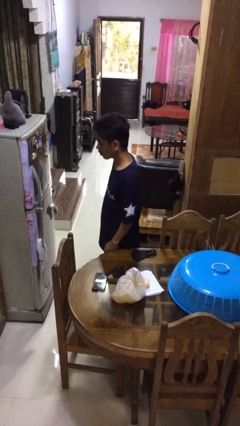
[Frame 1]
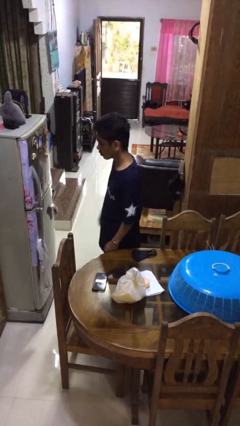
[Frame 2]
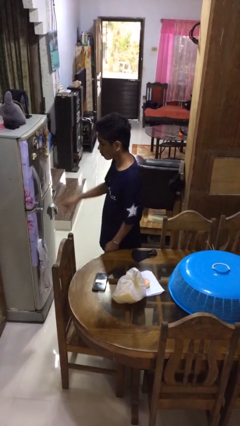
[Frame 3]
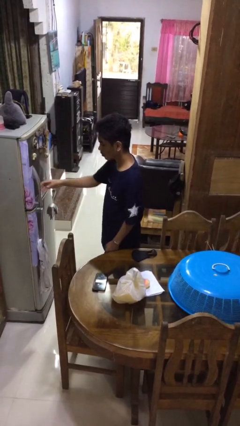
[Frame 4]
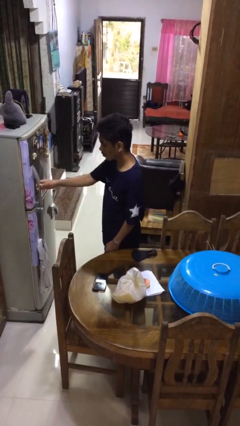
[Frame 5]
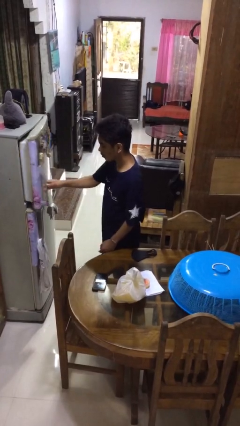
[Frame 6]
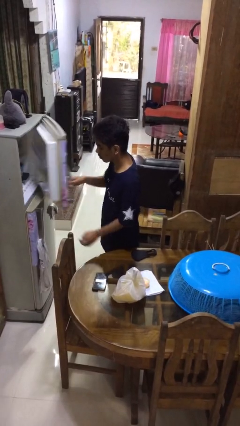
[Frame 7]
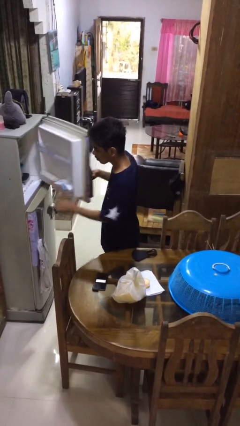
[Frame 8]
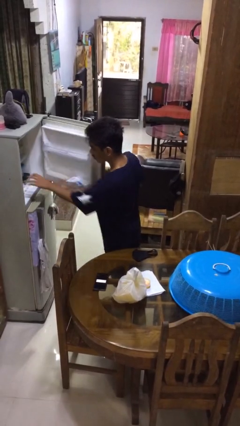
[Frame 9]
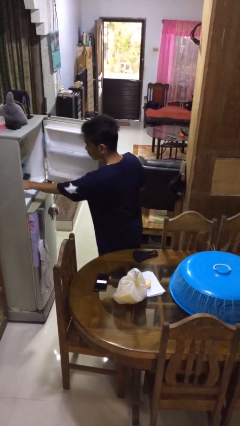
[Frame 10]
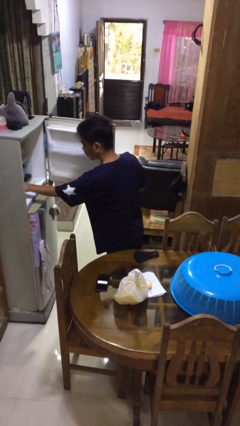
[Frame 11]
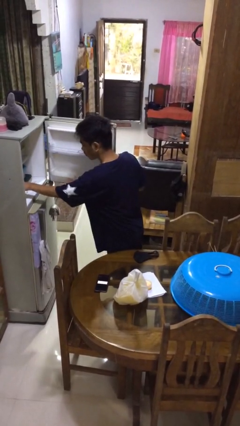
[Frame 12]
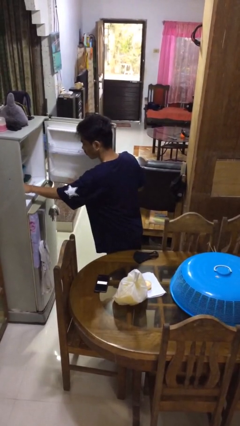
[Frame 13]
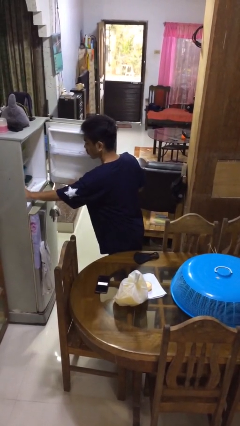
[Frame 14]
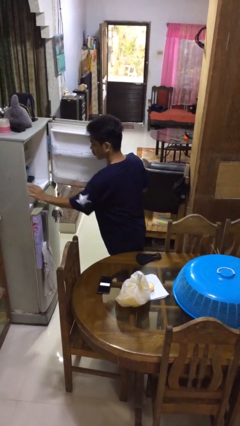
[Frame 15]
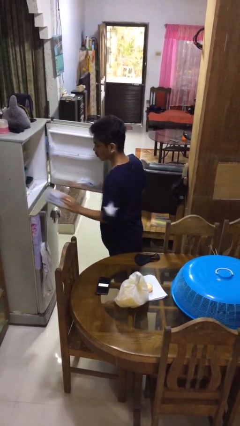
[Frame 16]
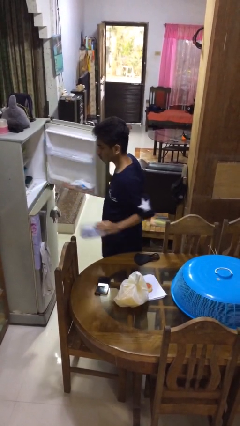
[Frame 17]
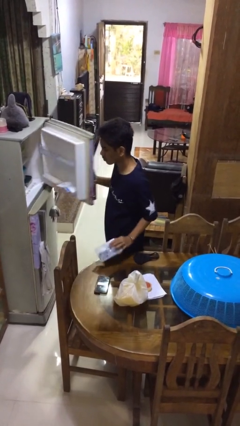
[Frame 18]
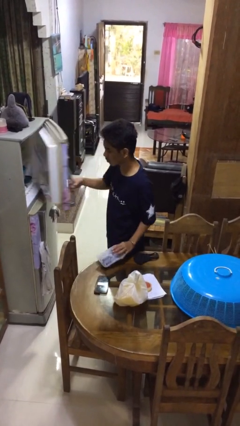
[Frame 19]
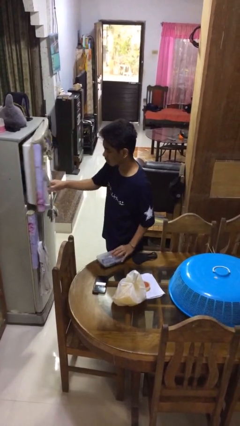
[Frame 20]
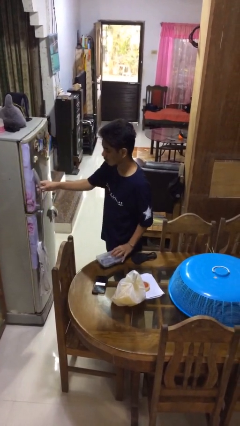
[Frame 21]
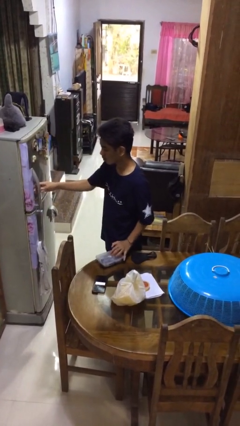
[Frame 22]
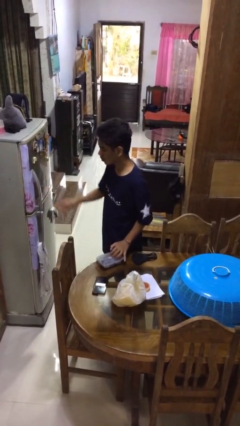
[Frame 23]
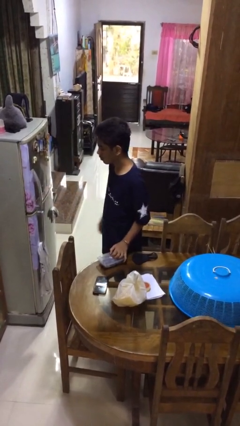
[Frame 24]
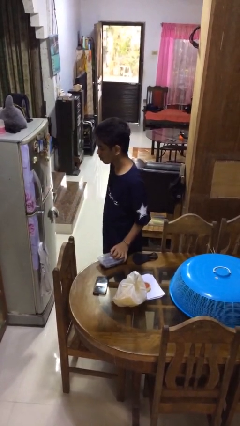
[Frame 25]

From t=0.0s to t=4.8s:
person takes object from refrigerator

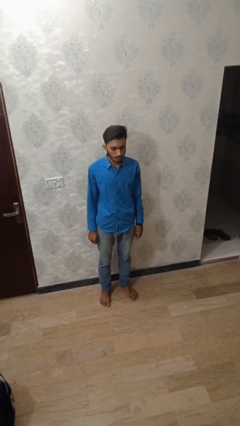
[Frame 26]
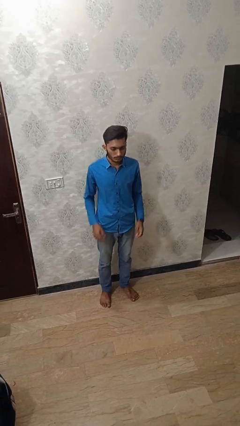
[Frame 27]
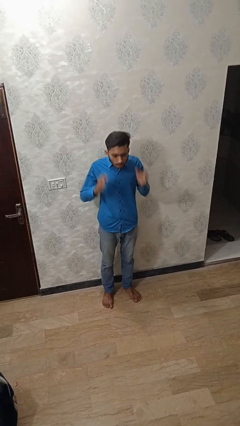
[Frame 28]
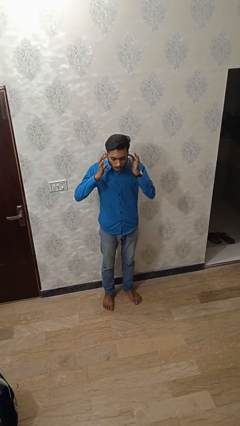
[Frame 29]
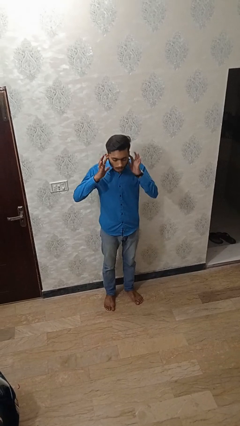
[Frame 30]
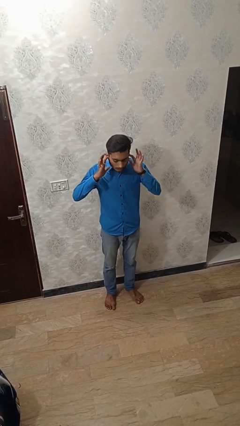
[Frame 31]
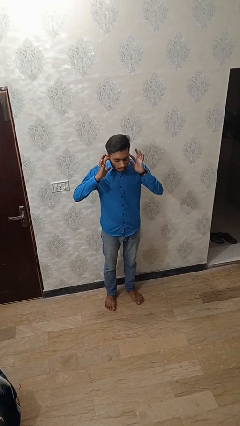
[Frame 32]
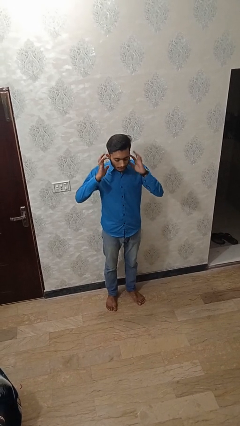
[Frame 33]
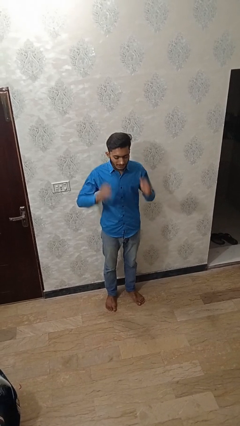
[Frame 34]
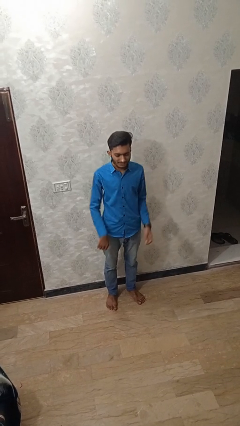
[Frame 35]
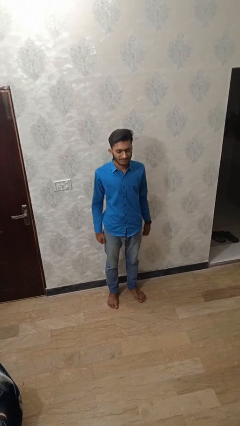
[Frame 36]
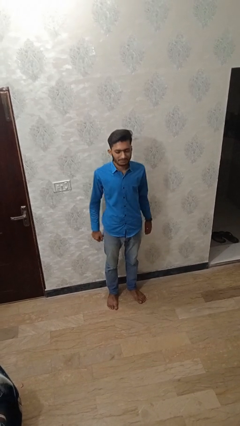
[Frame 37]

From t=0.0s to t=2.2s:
person puts fingers in ear

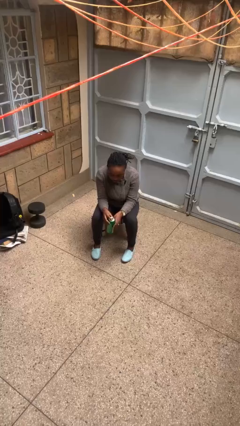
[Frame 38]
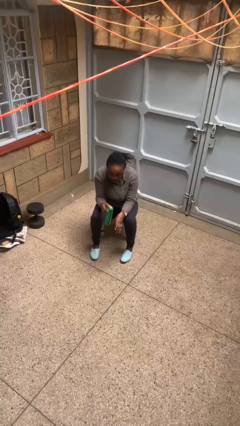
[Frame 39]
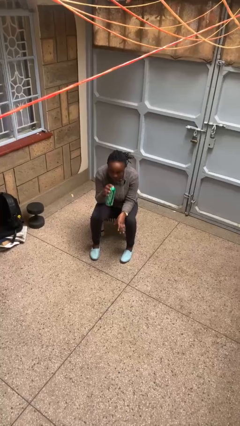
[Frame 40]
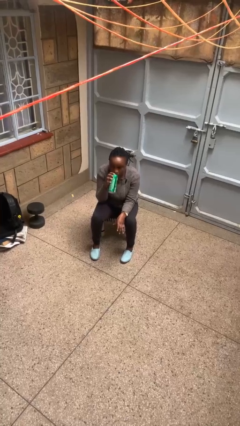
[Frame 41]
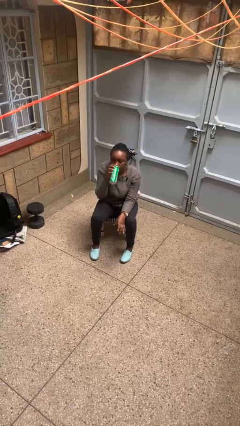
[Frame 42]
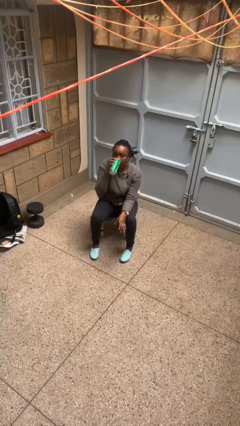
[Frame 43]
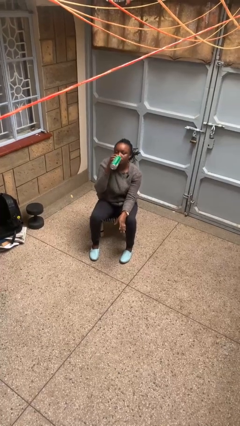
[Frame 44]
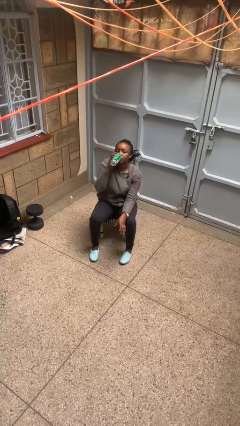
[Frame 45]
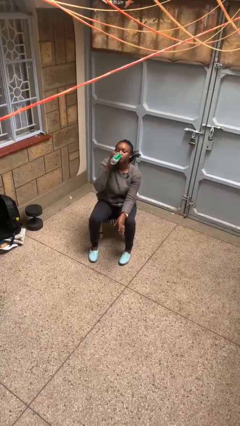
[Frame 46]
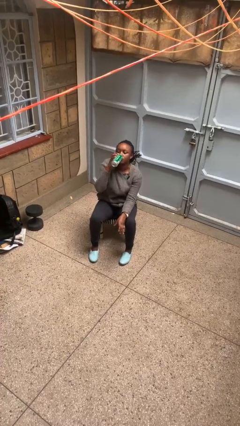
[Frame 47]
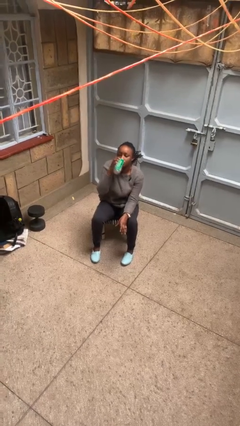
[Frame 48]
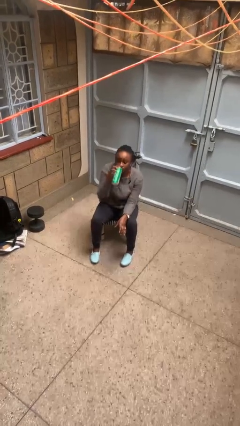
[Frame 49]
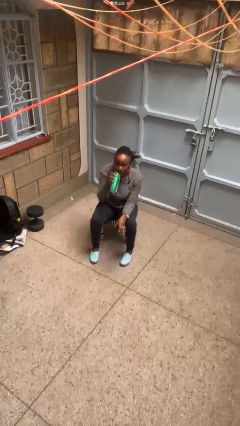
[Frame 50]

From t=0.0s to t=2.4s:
person drinks from beverage can

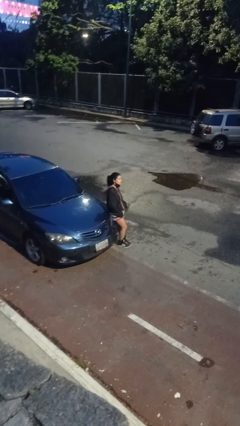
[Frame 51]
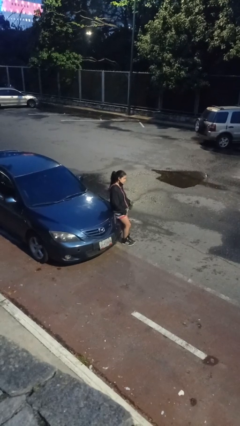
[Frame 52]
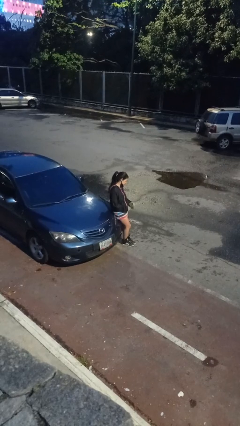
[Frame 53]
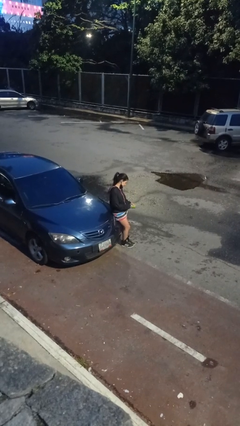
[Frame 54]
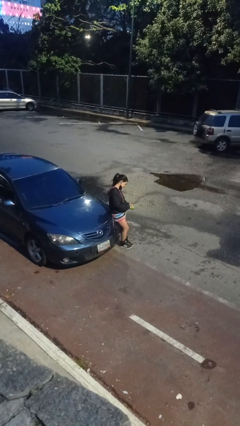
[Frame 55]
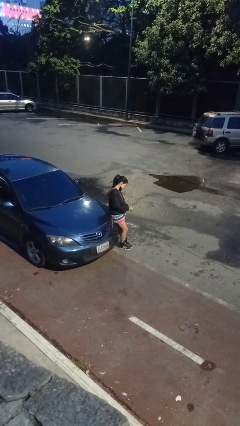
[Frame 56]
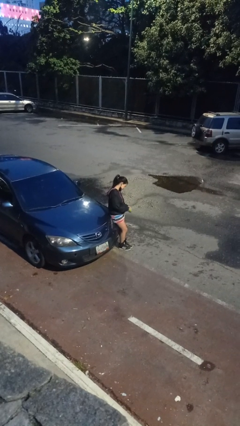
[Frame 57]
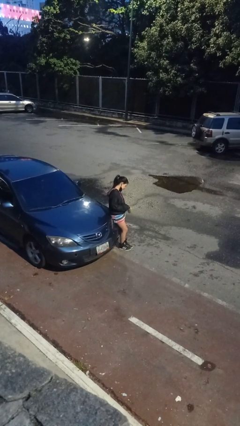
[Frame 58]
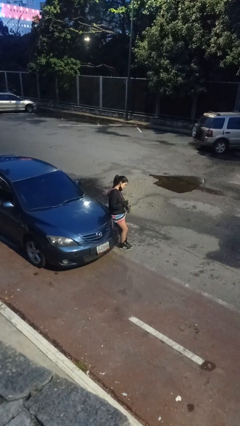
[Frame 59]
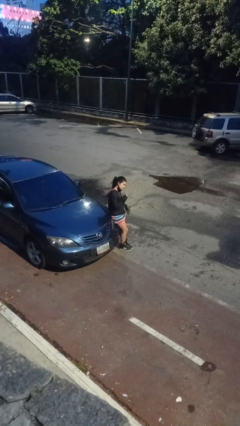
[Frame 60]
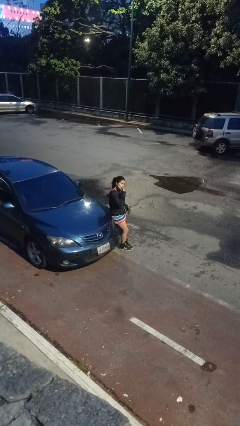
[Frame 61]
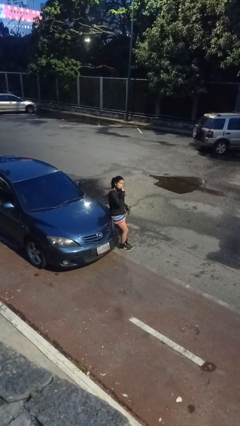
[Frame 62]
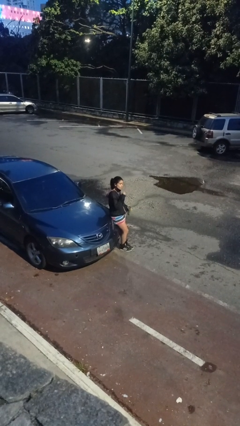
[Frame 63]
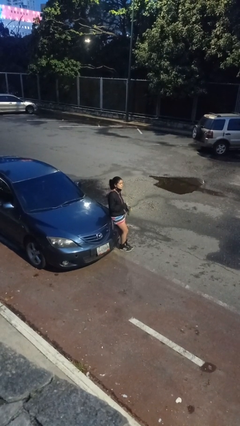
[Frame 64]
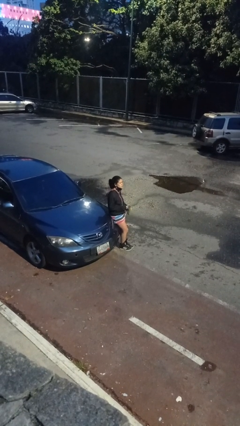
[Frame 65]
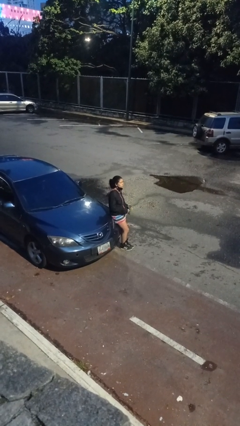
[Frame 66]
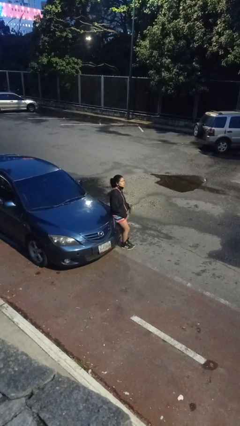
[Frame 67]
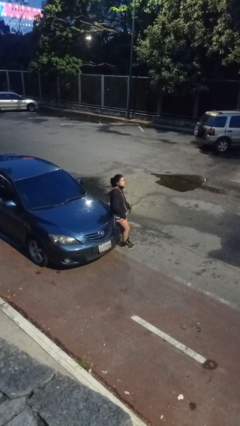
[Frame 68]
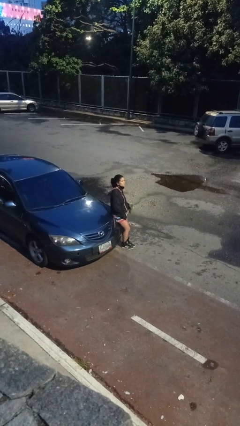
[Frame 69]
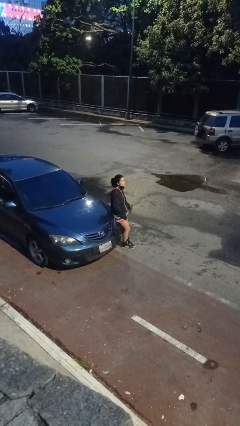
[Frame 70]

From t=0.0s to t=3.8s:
person eats snack from bag

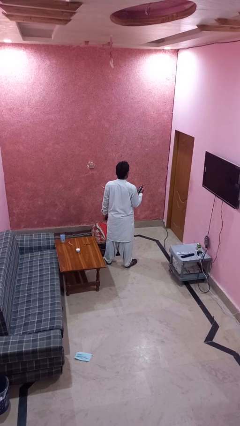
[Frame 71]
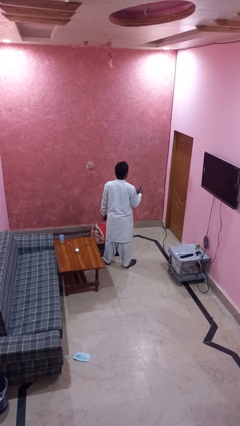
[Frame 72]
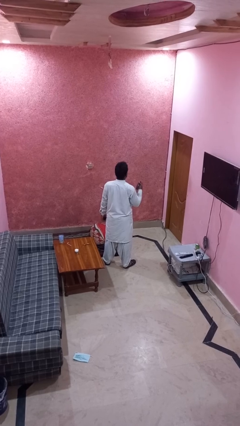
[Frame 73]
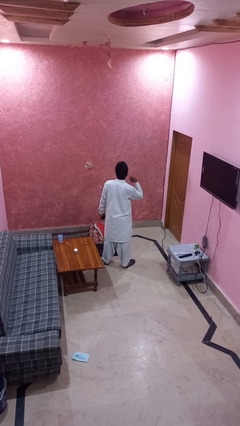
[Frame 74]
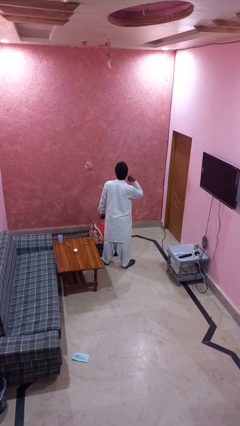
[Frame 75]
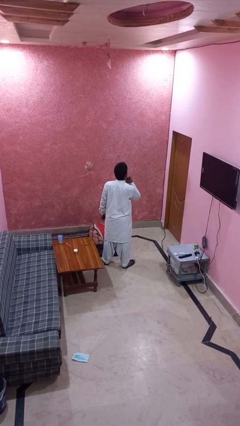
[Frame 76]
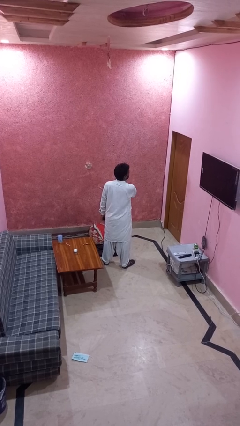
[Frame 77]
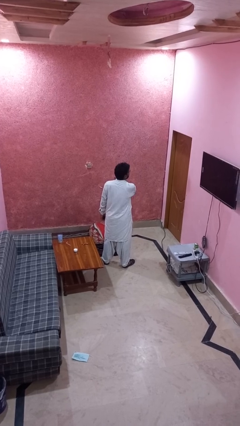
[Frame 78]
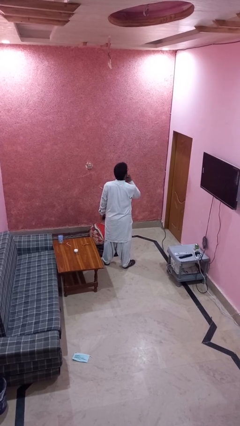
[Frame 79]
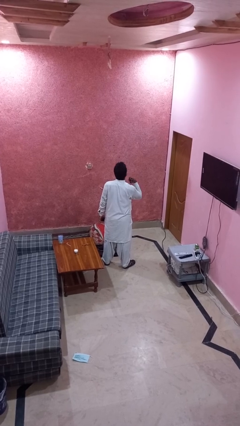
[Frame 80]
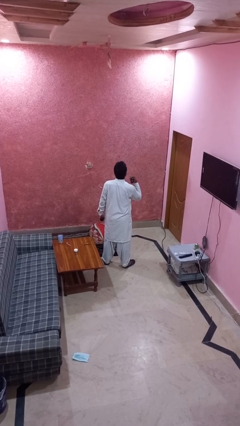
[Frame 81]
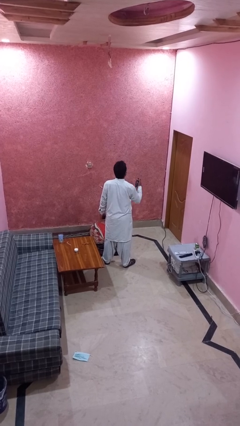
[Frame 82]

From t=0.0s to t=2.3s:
person applies deodorant

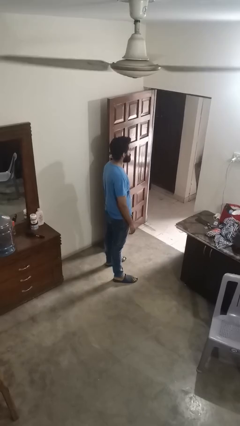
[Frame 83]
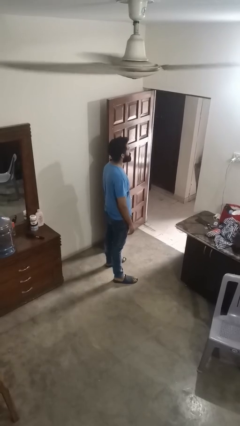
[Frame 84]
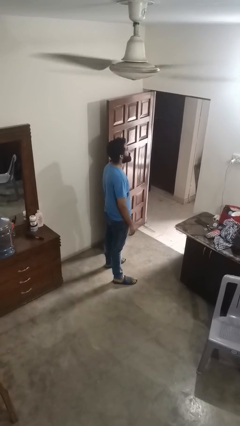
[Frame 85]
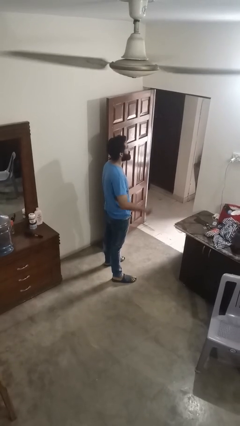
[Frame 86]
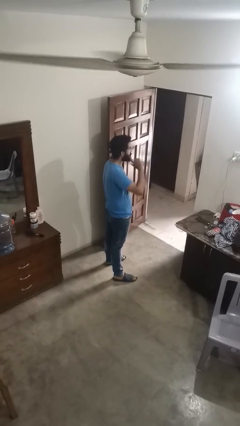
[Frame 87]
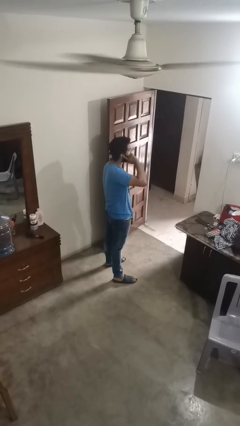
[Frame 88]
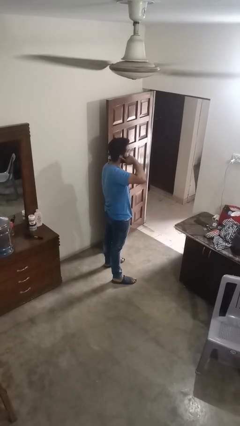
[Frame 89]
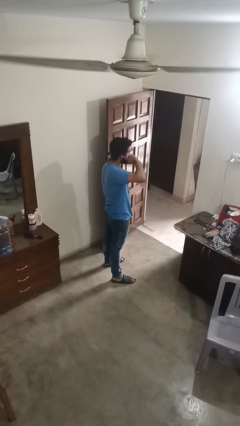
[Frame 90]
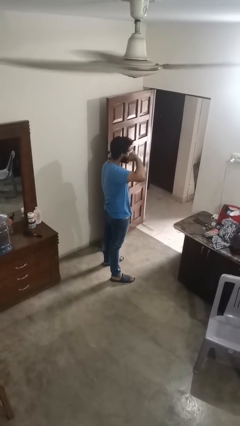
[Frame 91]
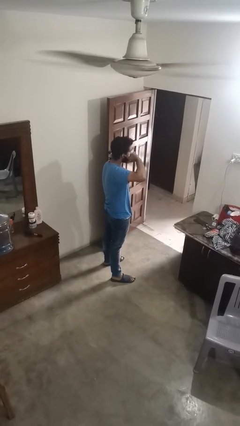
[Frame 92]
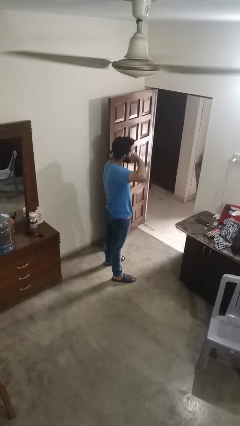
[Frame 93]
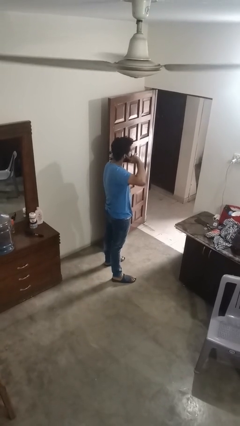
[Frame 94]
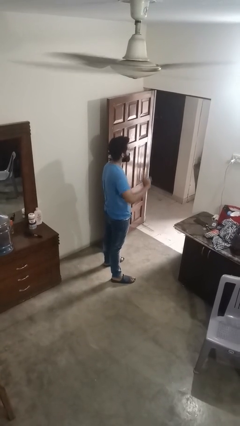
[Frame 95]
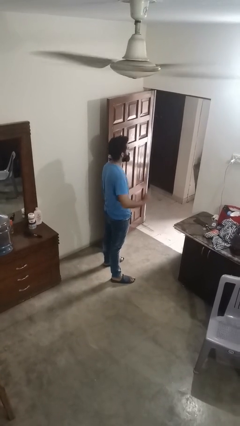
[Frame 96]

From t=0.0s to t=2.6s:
person touches earlobe
